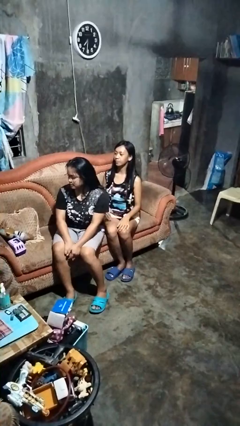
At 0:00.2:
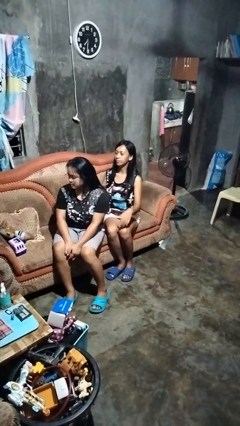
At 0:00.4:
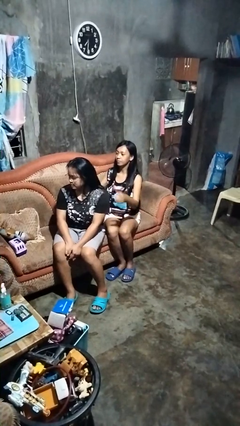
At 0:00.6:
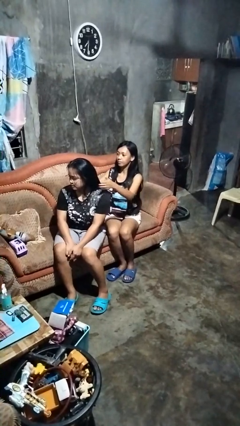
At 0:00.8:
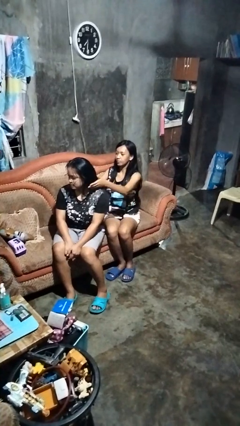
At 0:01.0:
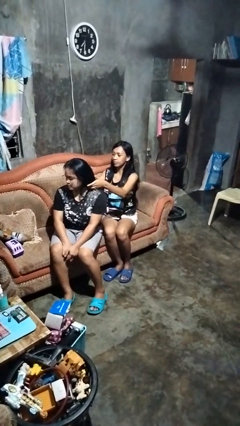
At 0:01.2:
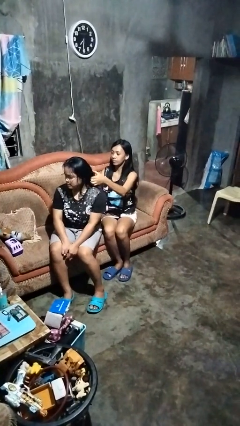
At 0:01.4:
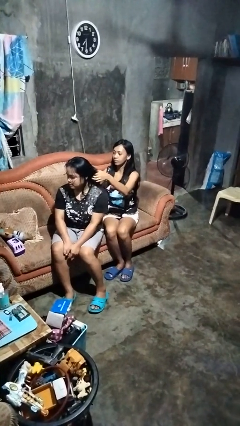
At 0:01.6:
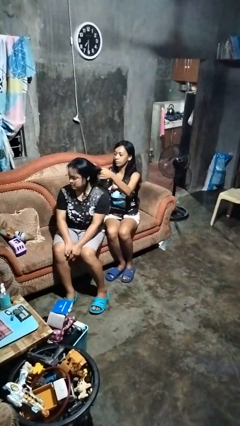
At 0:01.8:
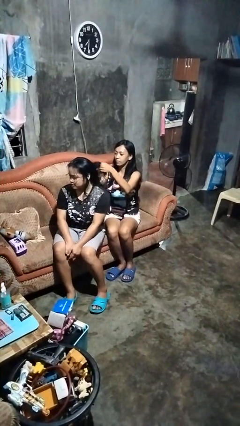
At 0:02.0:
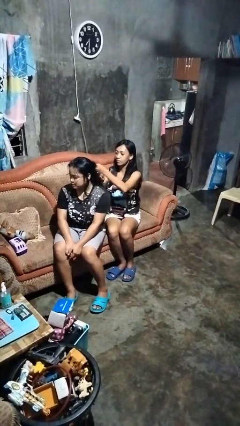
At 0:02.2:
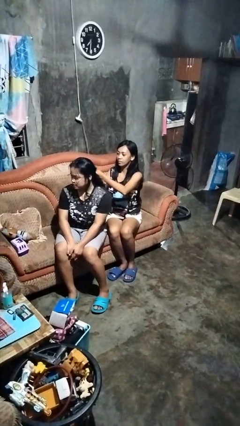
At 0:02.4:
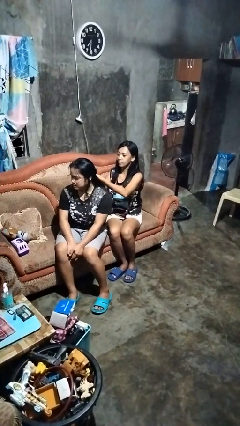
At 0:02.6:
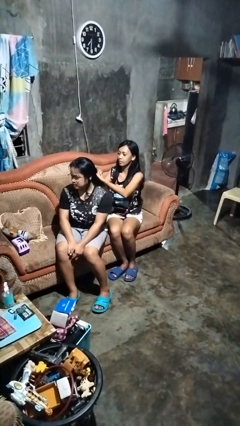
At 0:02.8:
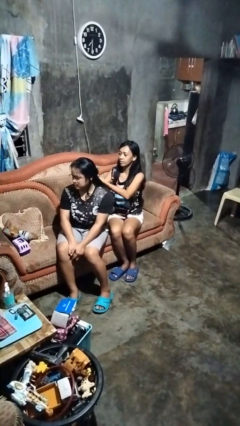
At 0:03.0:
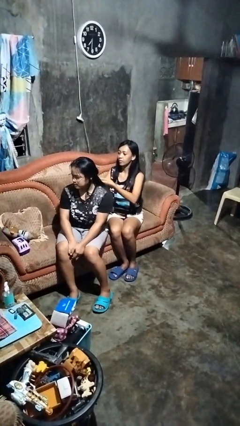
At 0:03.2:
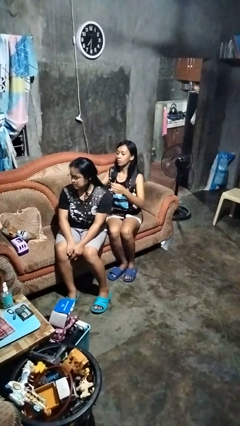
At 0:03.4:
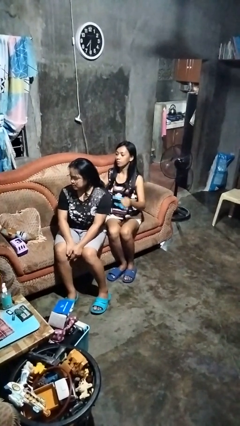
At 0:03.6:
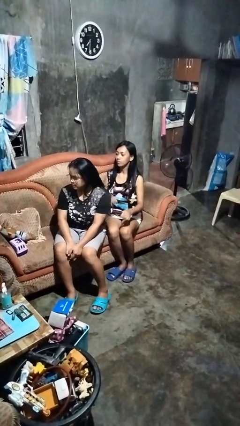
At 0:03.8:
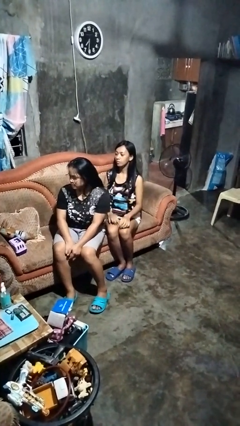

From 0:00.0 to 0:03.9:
person braids hair of person

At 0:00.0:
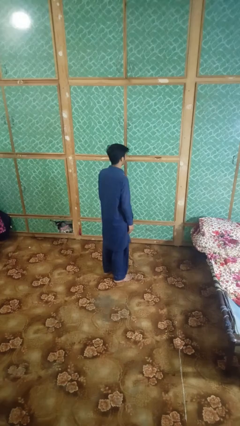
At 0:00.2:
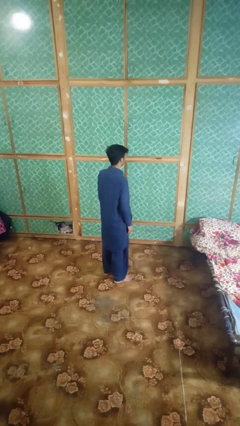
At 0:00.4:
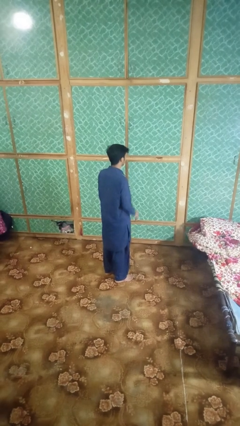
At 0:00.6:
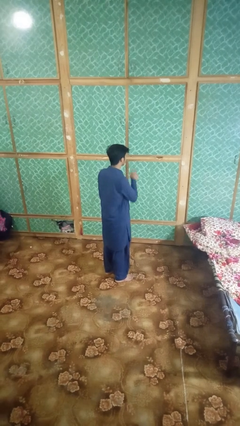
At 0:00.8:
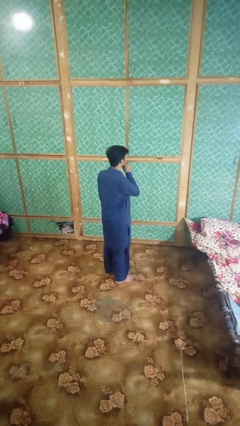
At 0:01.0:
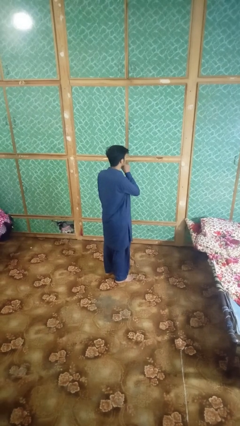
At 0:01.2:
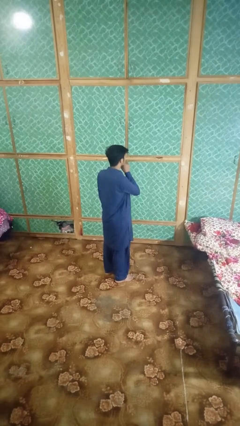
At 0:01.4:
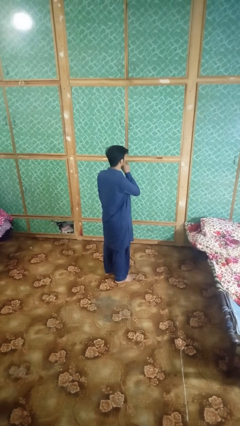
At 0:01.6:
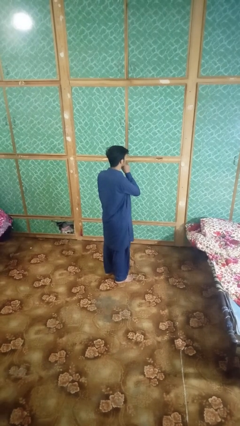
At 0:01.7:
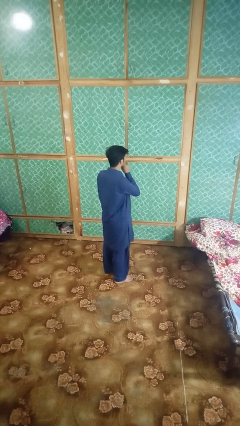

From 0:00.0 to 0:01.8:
person gestures be quiet

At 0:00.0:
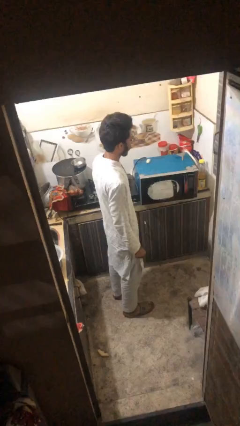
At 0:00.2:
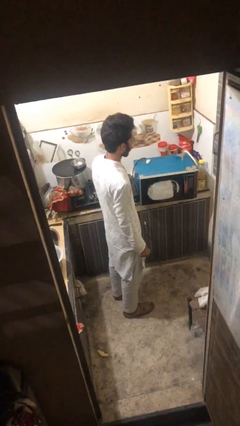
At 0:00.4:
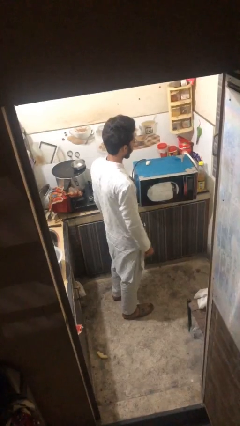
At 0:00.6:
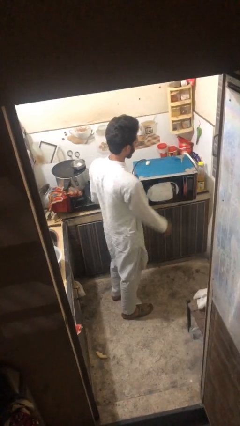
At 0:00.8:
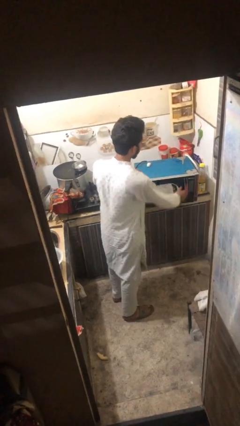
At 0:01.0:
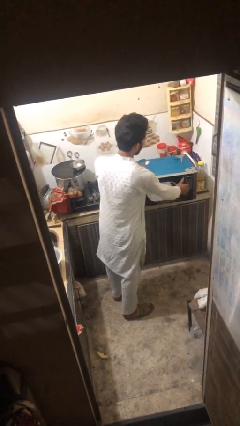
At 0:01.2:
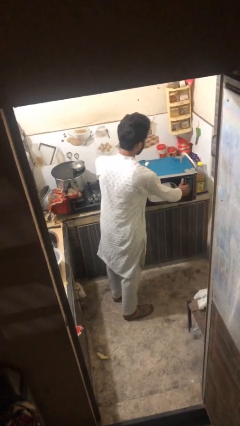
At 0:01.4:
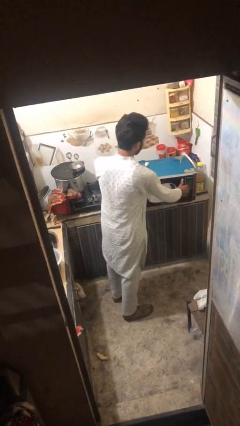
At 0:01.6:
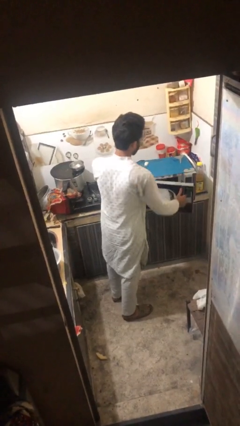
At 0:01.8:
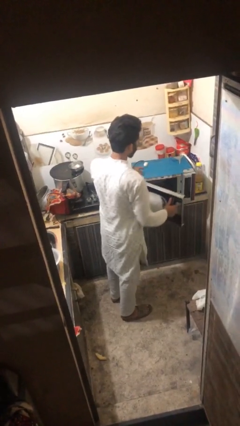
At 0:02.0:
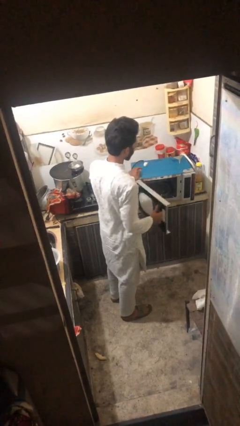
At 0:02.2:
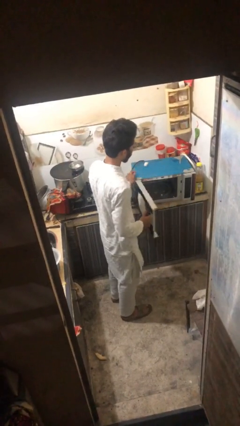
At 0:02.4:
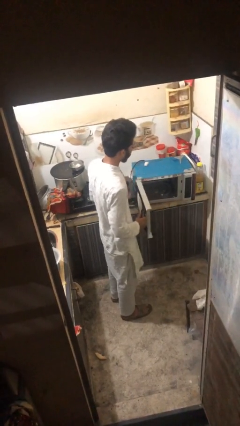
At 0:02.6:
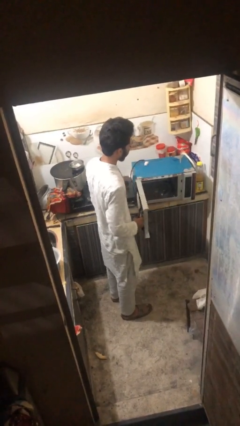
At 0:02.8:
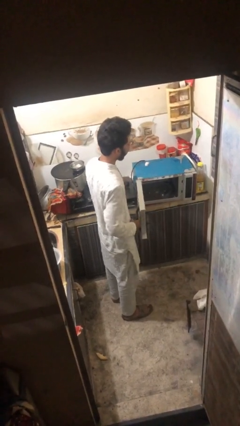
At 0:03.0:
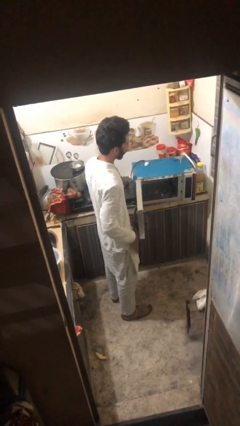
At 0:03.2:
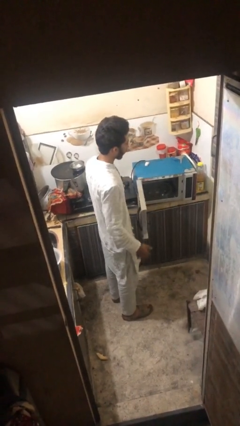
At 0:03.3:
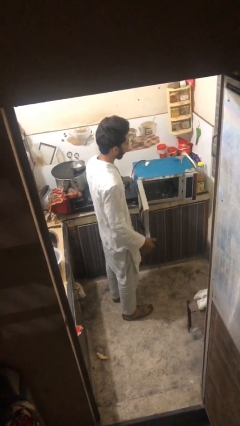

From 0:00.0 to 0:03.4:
person opens oven door

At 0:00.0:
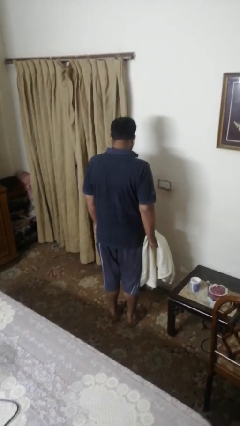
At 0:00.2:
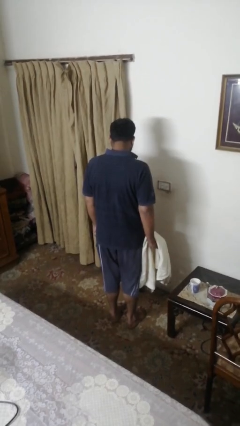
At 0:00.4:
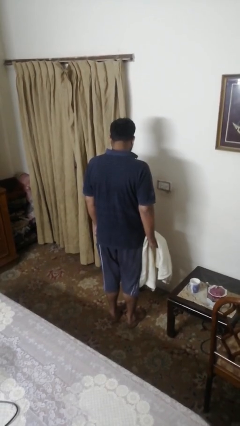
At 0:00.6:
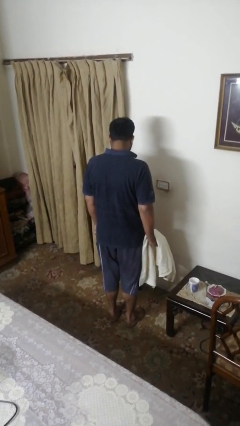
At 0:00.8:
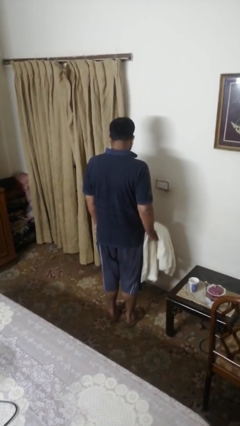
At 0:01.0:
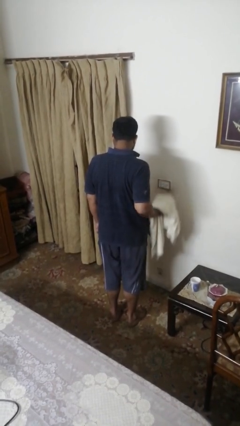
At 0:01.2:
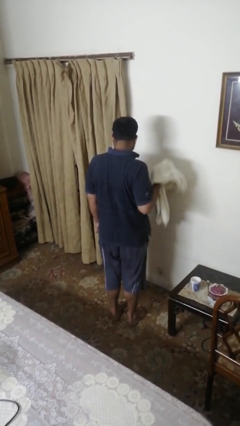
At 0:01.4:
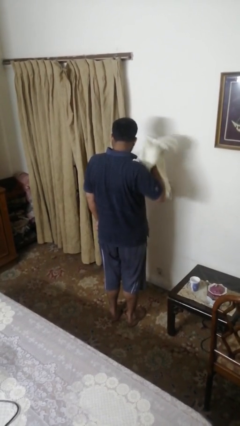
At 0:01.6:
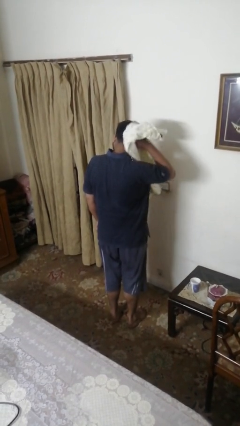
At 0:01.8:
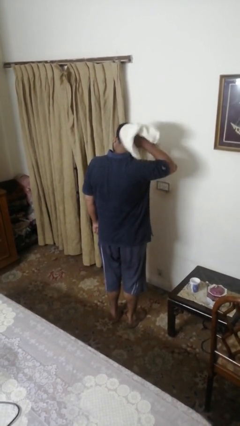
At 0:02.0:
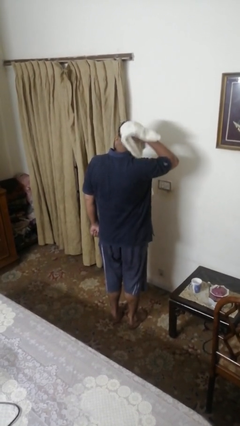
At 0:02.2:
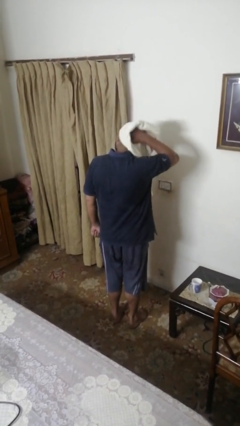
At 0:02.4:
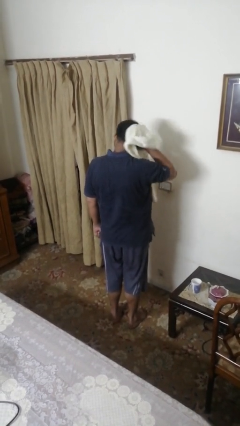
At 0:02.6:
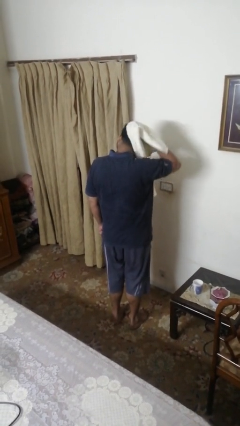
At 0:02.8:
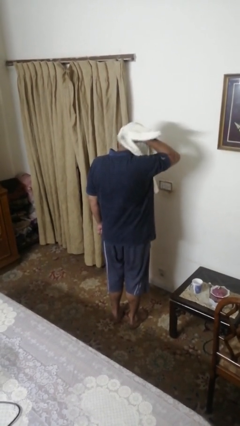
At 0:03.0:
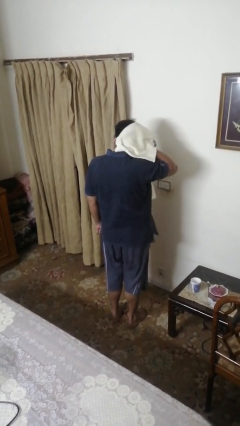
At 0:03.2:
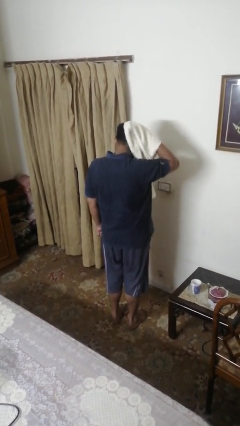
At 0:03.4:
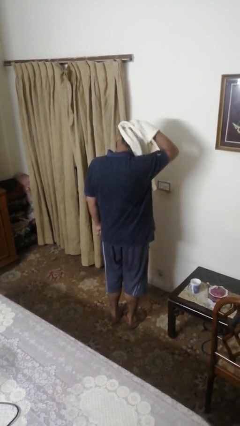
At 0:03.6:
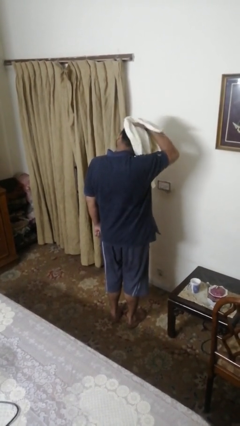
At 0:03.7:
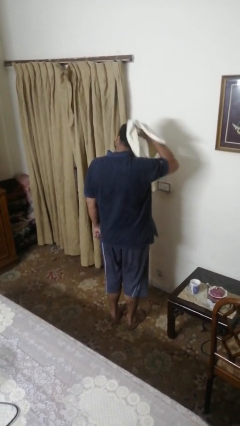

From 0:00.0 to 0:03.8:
person dries hair with towel

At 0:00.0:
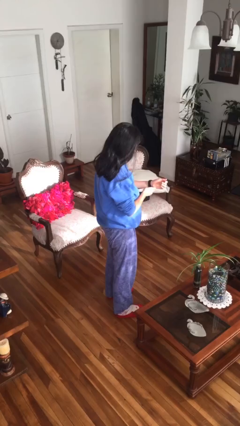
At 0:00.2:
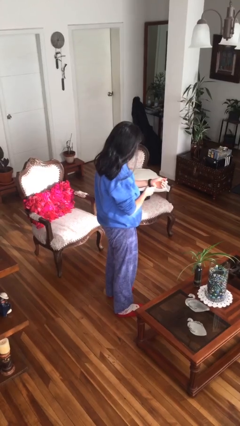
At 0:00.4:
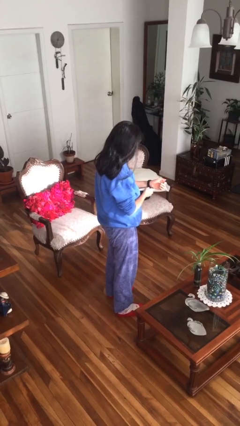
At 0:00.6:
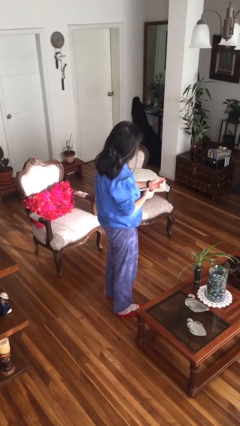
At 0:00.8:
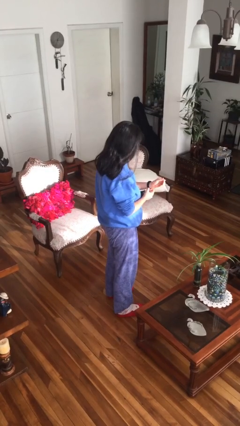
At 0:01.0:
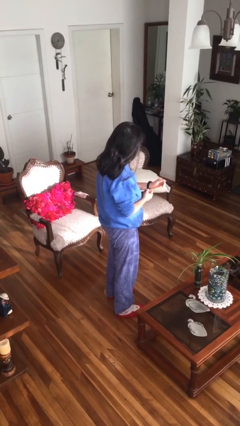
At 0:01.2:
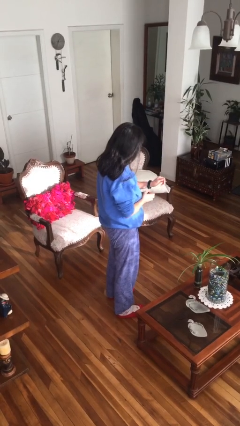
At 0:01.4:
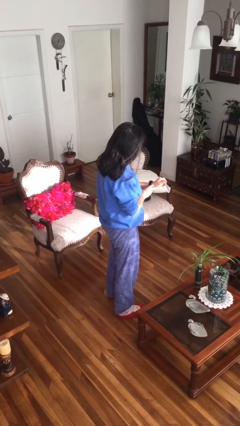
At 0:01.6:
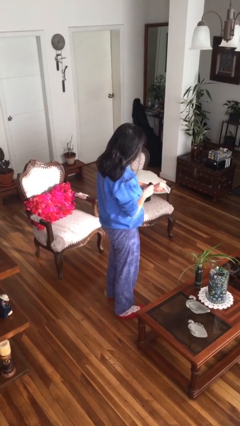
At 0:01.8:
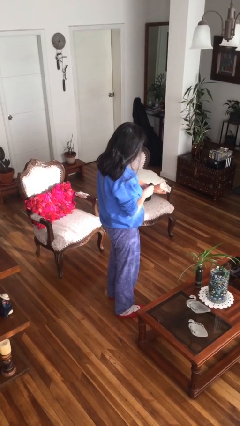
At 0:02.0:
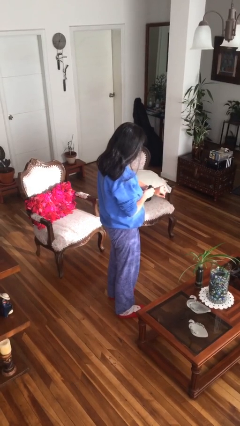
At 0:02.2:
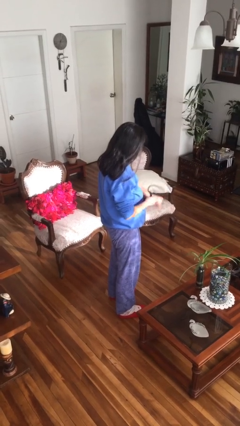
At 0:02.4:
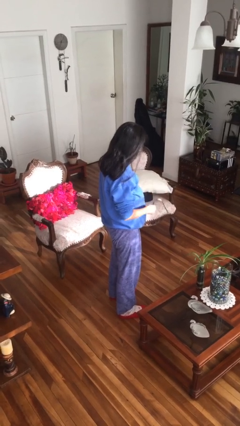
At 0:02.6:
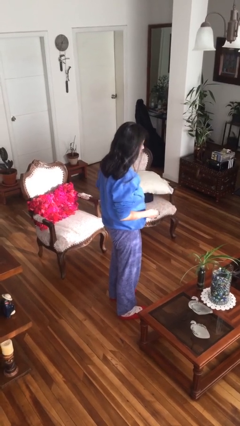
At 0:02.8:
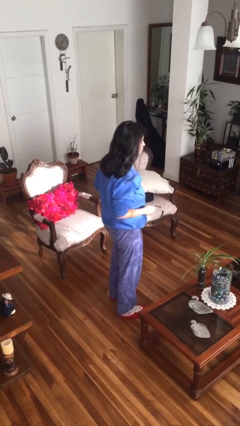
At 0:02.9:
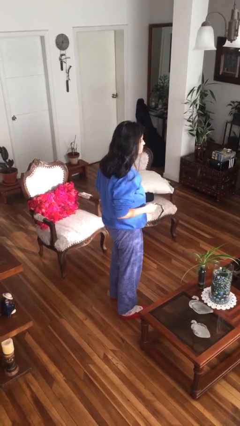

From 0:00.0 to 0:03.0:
person takes off wristwatch

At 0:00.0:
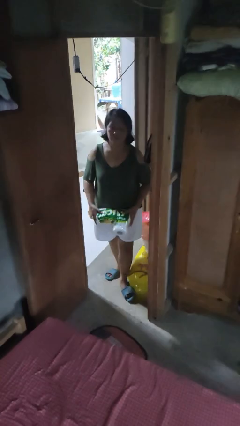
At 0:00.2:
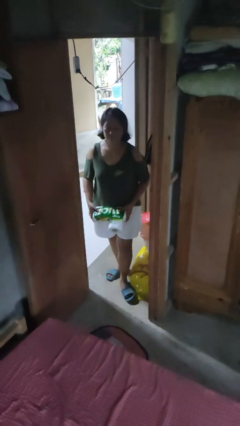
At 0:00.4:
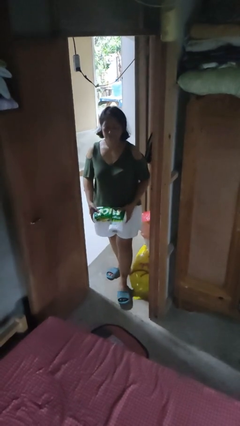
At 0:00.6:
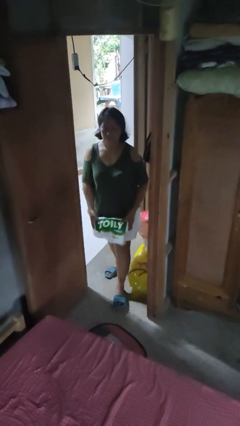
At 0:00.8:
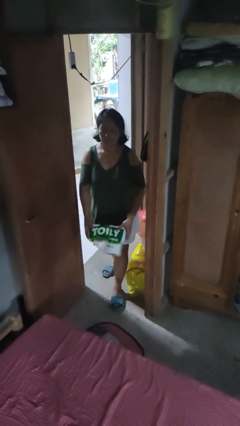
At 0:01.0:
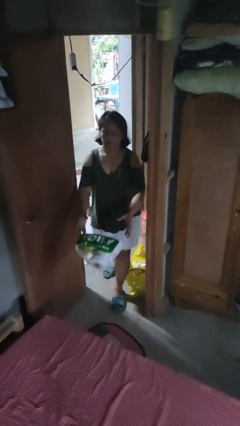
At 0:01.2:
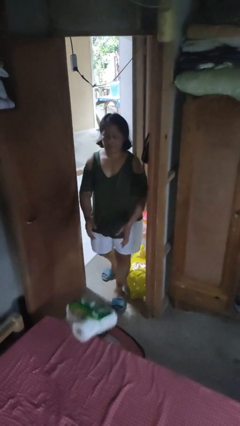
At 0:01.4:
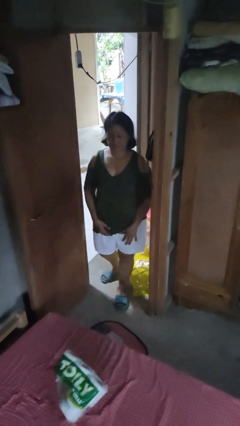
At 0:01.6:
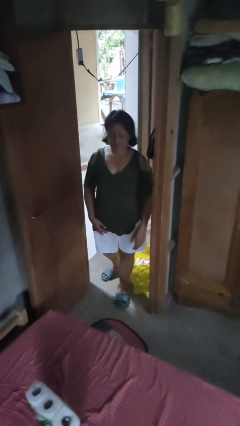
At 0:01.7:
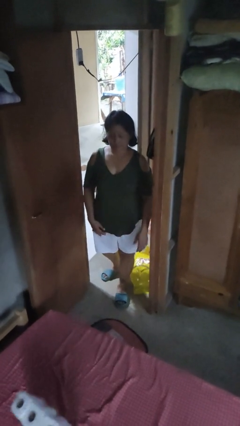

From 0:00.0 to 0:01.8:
person throws object on bed
